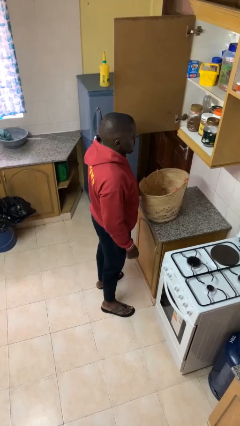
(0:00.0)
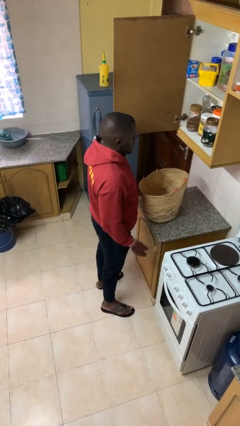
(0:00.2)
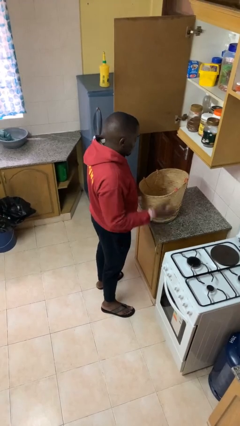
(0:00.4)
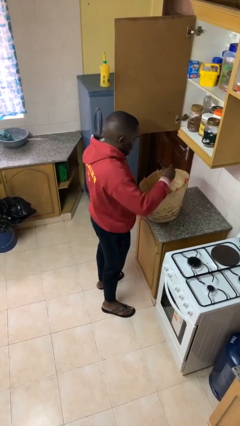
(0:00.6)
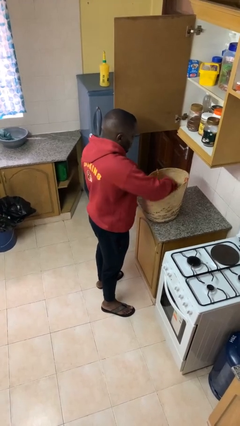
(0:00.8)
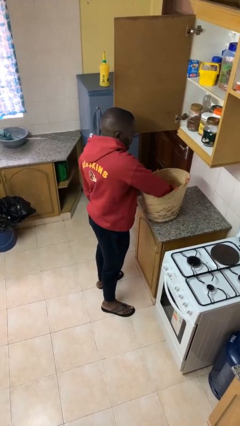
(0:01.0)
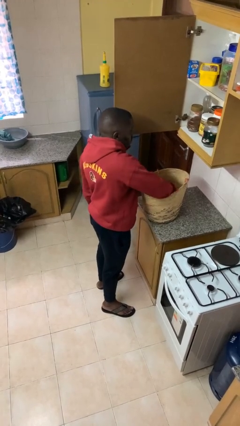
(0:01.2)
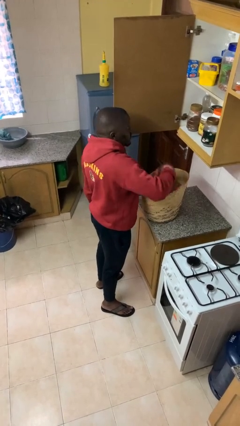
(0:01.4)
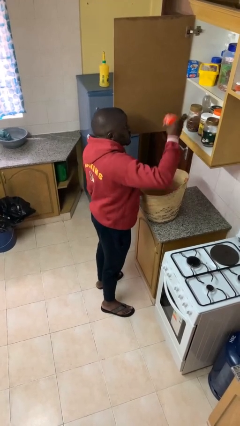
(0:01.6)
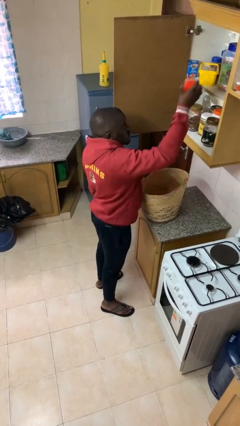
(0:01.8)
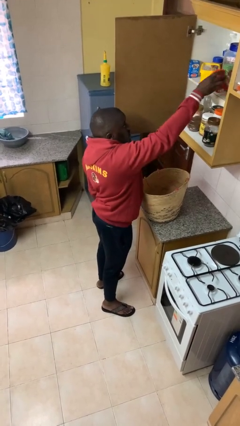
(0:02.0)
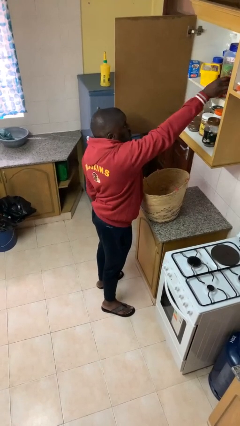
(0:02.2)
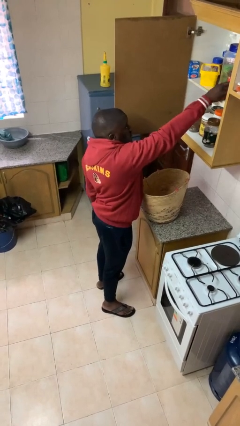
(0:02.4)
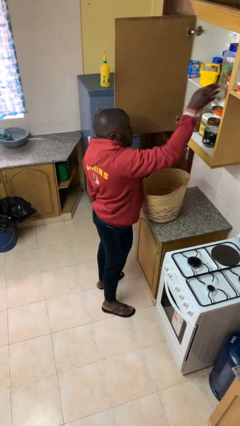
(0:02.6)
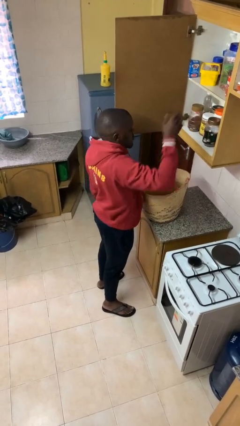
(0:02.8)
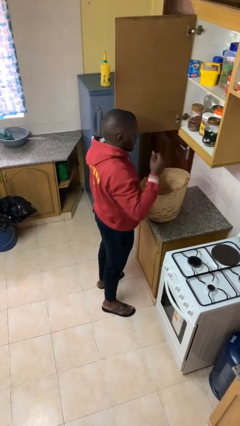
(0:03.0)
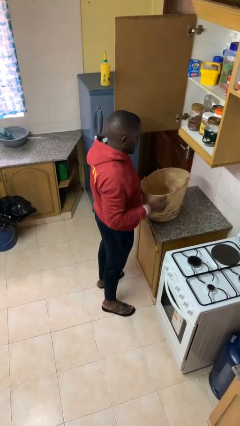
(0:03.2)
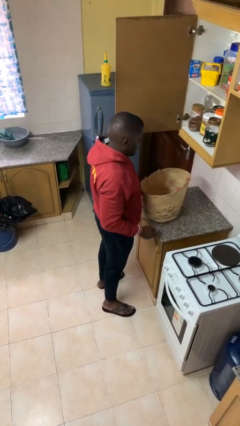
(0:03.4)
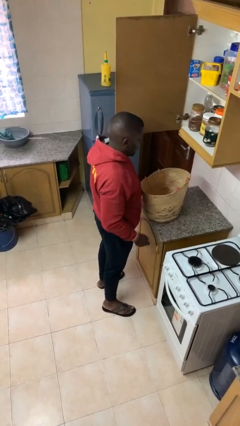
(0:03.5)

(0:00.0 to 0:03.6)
person loads groceries into cabinet

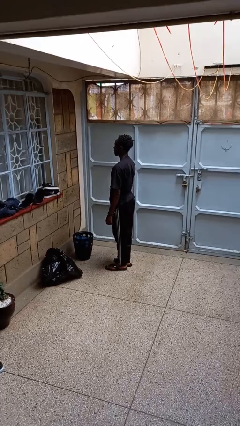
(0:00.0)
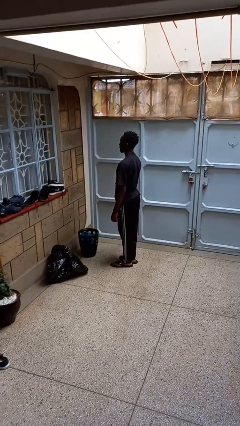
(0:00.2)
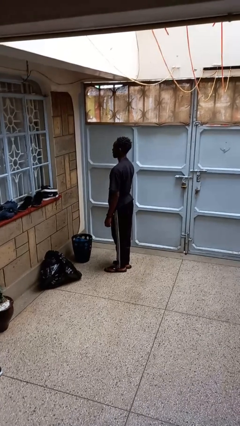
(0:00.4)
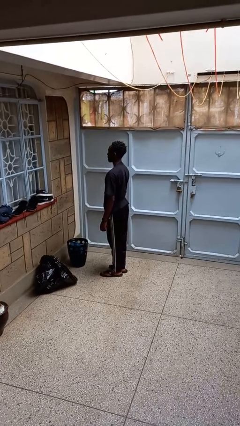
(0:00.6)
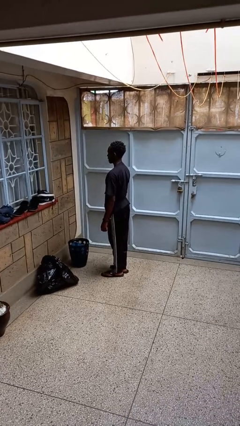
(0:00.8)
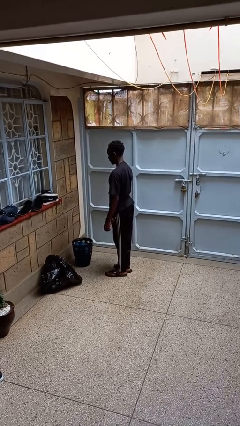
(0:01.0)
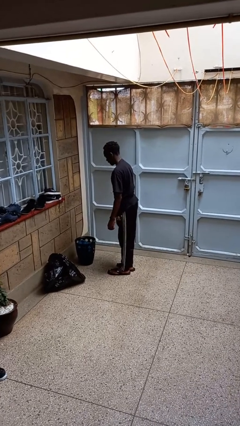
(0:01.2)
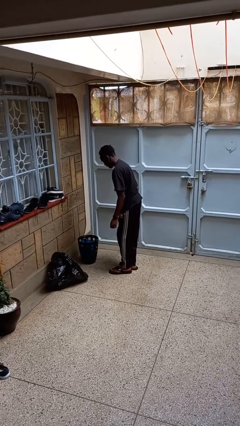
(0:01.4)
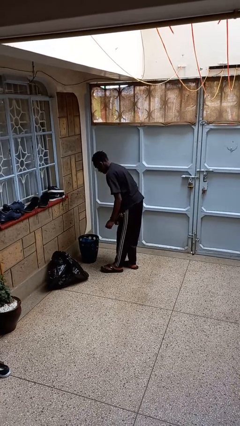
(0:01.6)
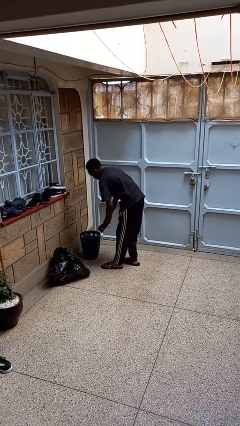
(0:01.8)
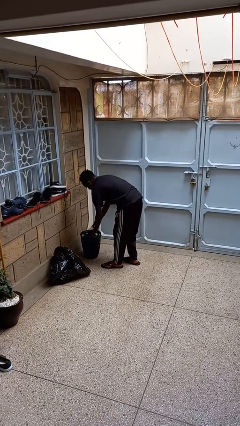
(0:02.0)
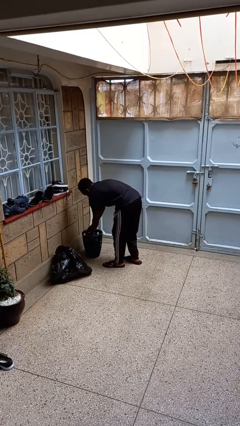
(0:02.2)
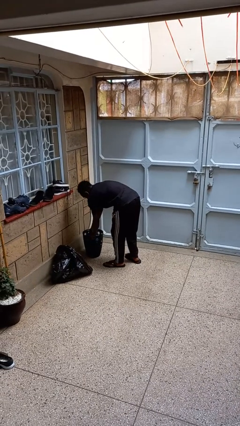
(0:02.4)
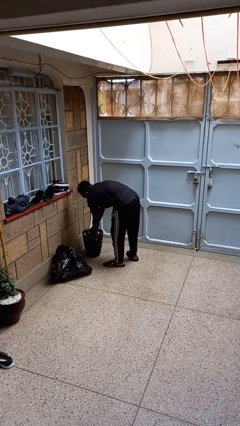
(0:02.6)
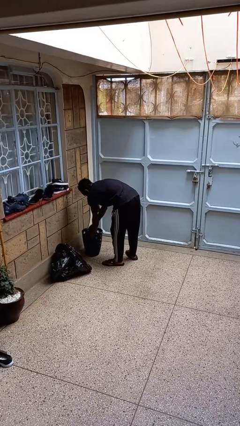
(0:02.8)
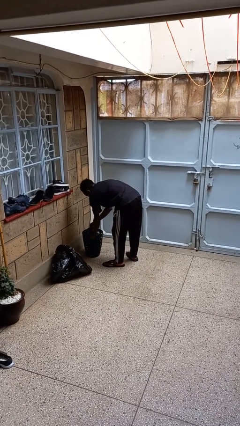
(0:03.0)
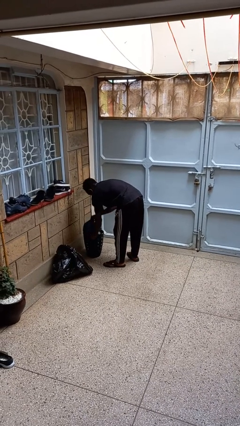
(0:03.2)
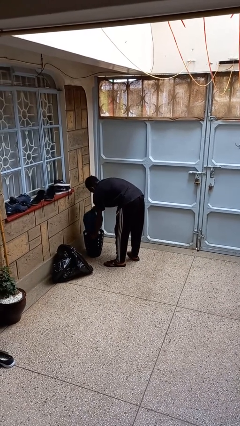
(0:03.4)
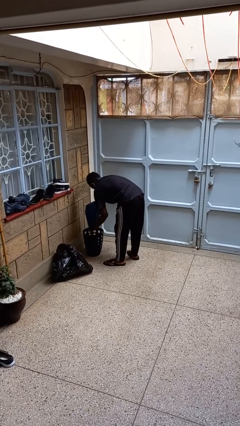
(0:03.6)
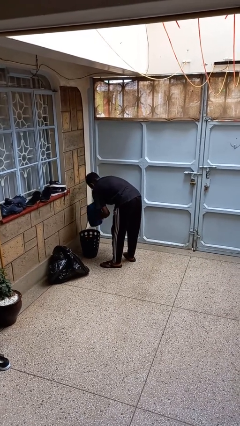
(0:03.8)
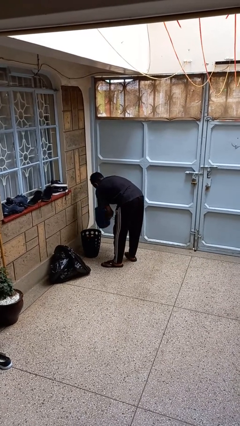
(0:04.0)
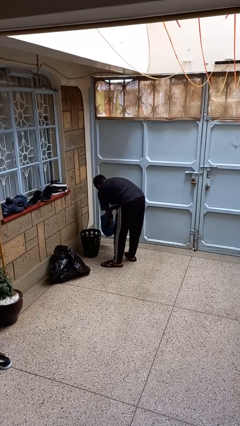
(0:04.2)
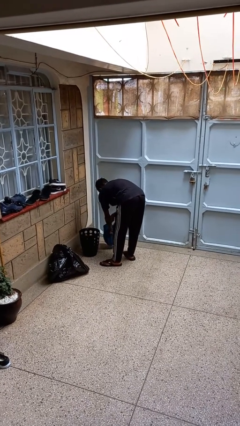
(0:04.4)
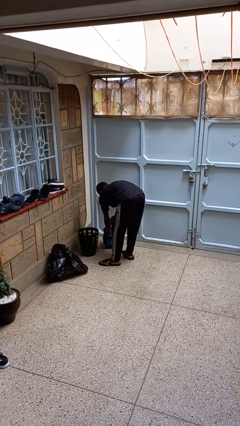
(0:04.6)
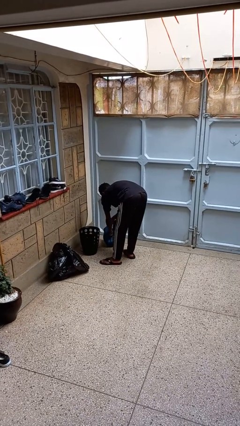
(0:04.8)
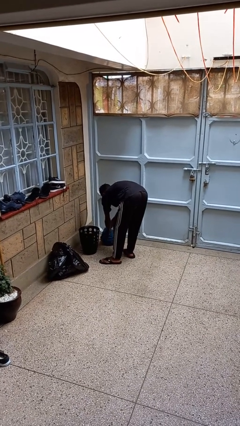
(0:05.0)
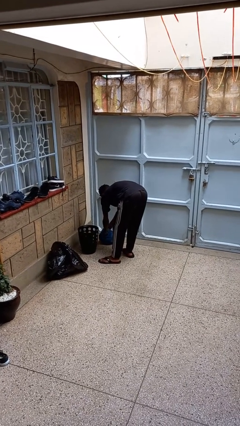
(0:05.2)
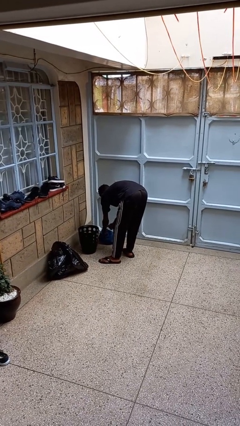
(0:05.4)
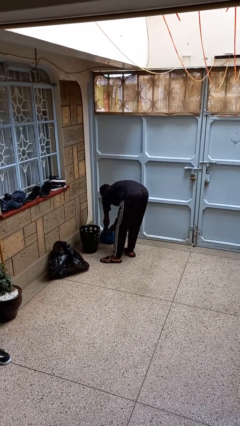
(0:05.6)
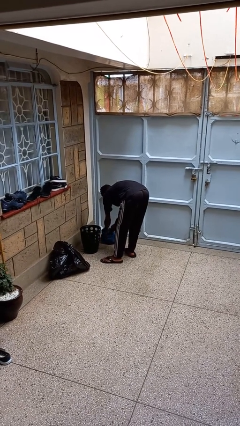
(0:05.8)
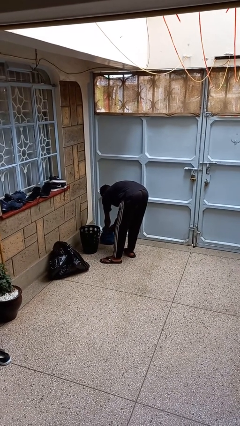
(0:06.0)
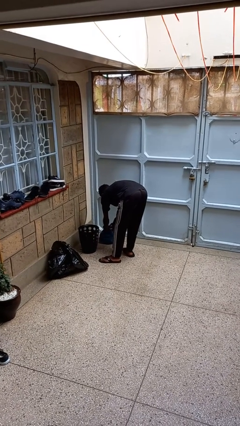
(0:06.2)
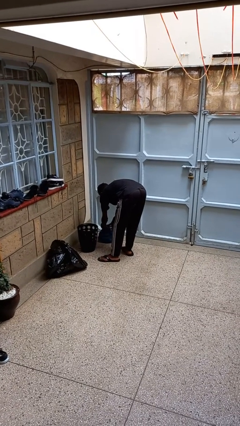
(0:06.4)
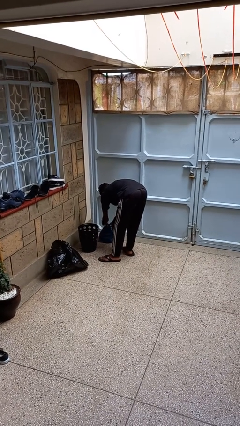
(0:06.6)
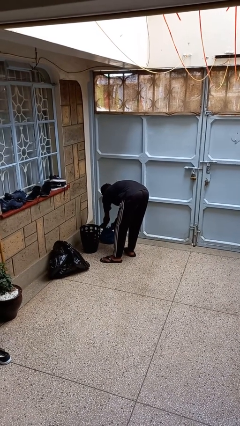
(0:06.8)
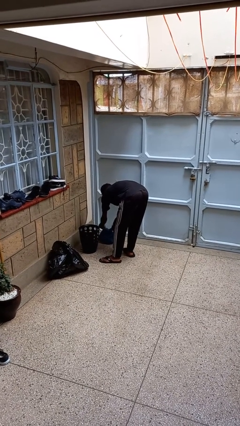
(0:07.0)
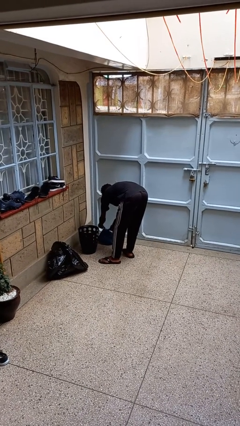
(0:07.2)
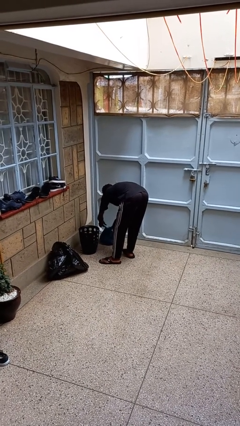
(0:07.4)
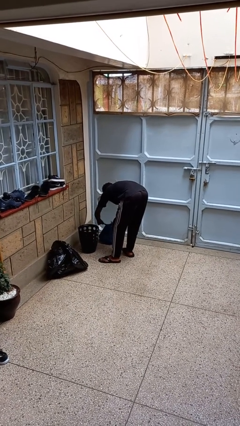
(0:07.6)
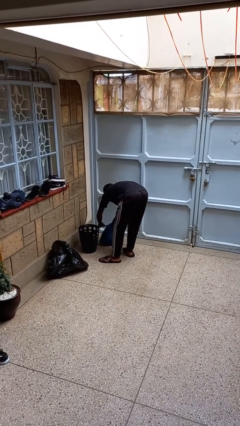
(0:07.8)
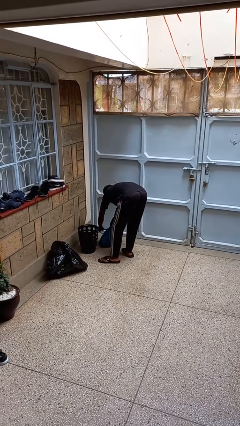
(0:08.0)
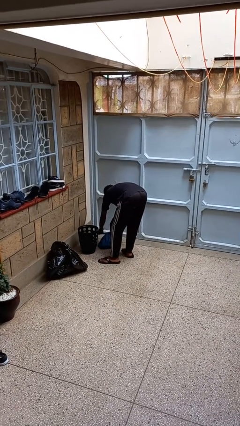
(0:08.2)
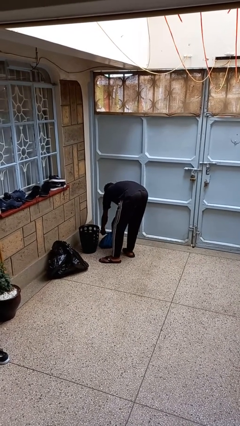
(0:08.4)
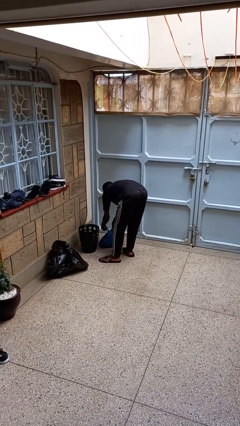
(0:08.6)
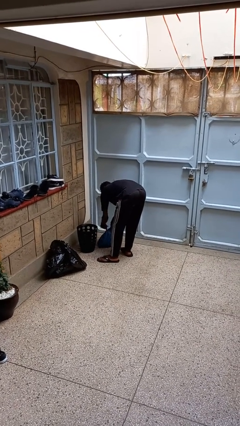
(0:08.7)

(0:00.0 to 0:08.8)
person removes trashbag from trashcan

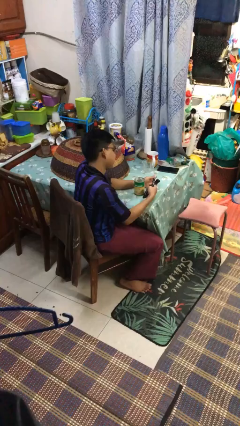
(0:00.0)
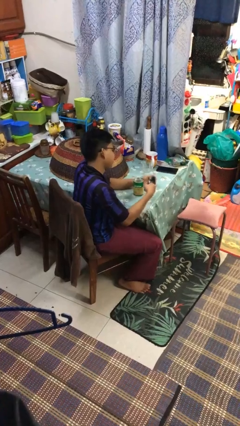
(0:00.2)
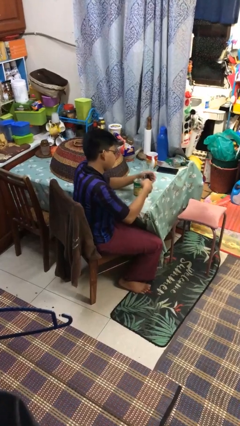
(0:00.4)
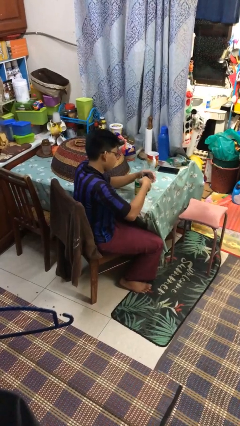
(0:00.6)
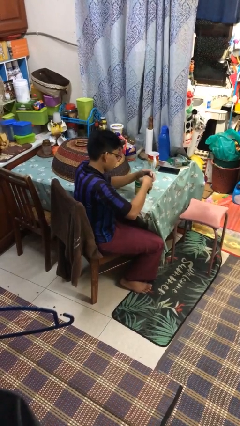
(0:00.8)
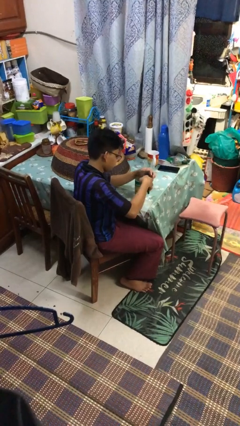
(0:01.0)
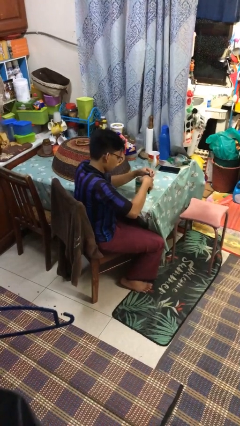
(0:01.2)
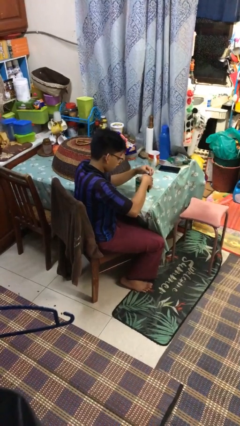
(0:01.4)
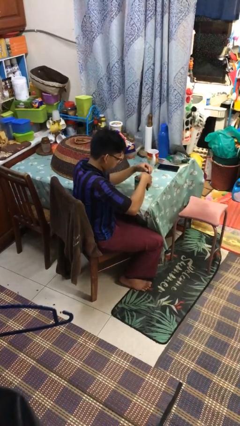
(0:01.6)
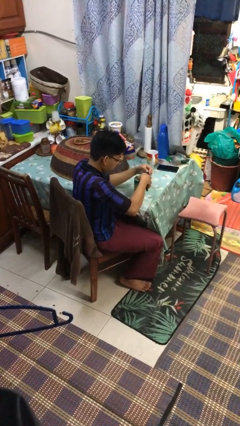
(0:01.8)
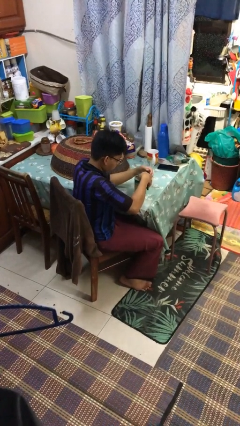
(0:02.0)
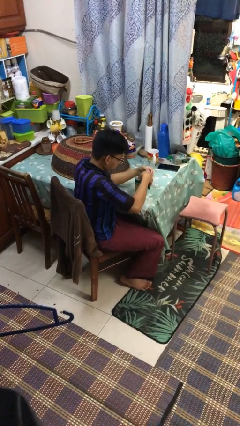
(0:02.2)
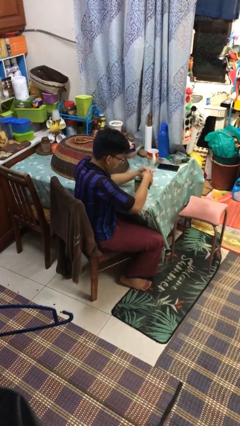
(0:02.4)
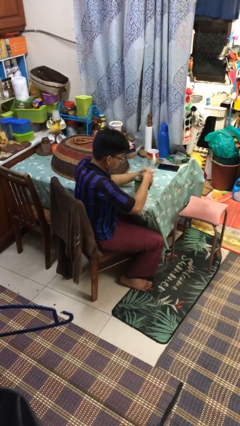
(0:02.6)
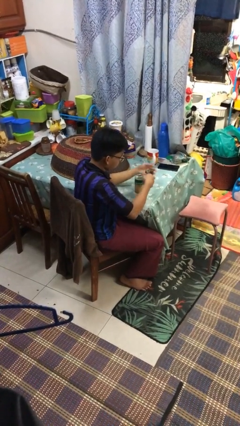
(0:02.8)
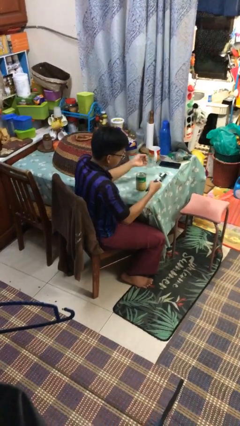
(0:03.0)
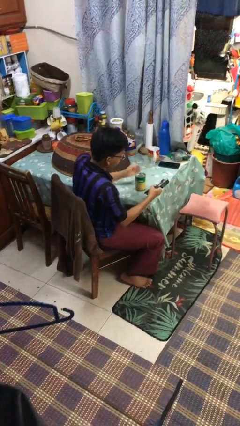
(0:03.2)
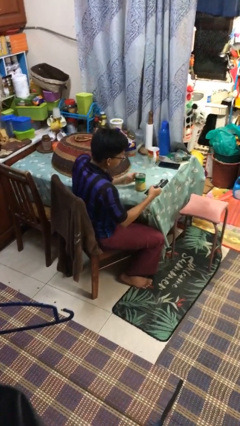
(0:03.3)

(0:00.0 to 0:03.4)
person opens can with can opener

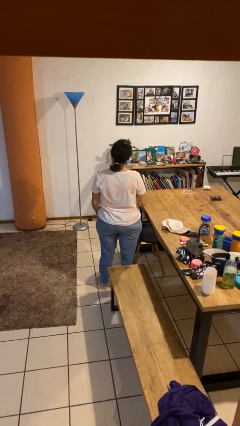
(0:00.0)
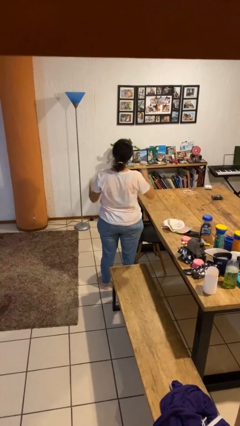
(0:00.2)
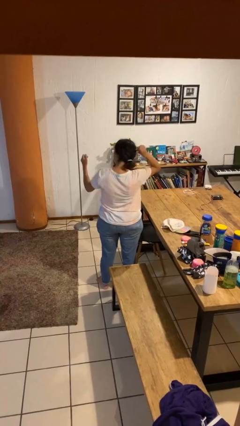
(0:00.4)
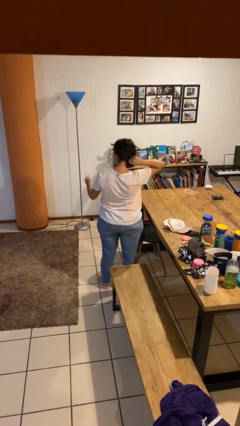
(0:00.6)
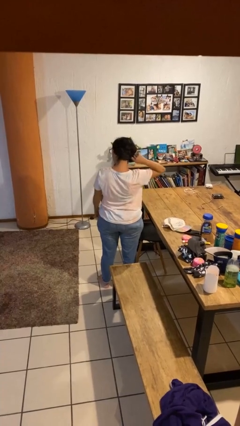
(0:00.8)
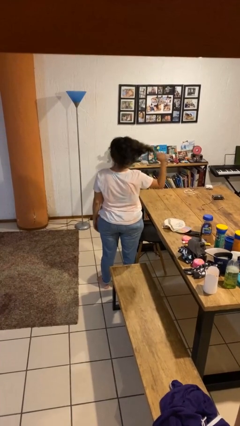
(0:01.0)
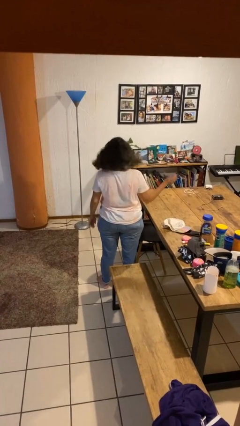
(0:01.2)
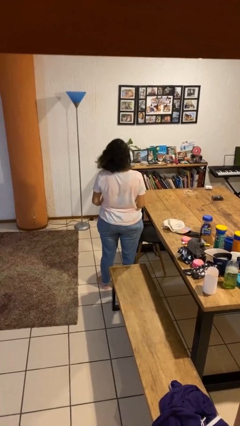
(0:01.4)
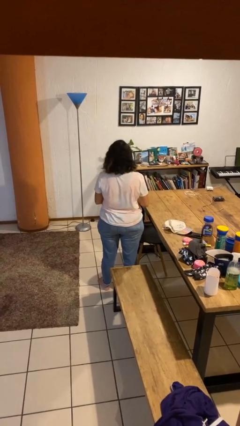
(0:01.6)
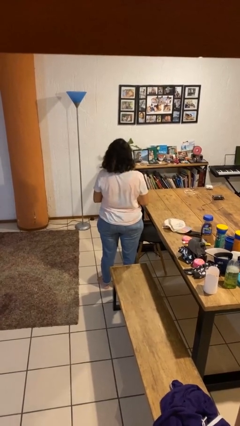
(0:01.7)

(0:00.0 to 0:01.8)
person takes off hairtie

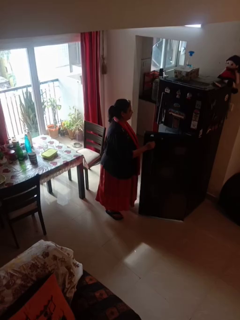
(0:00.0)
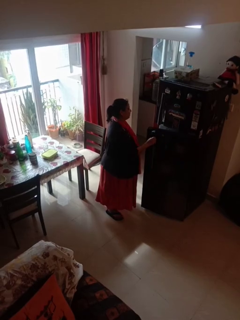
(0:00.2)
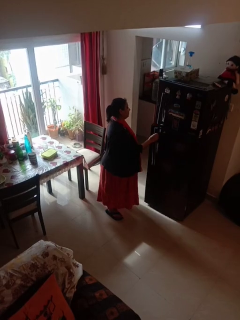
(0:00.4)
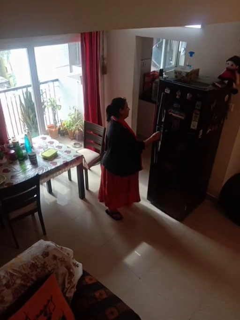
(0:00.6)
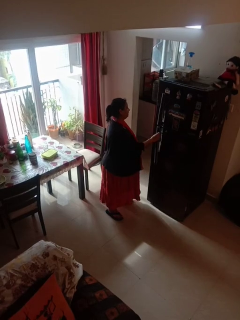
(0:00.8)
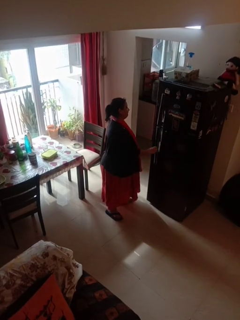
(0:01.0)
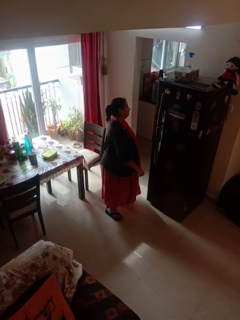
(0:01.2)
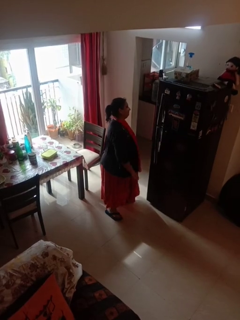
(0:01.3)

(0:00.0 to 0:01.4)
person closes refrigerator
